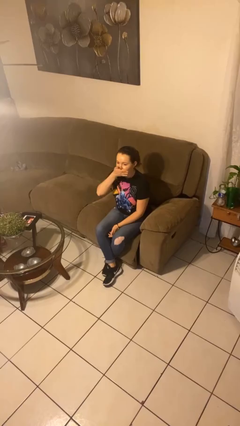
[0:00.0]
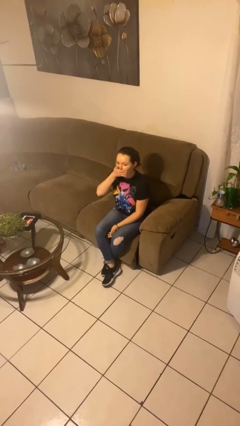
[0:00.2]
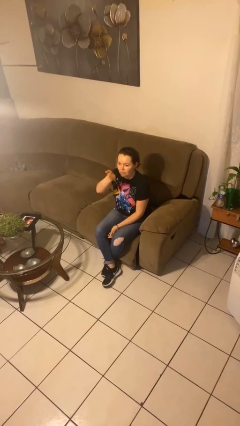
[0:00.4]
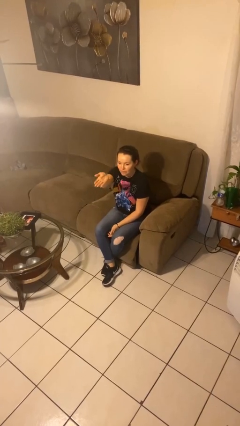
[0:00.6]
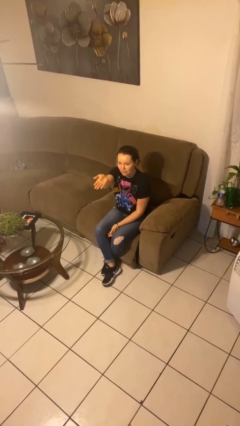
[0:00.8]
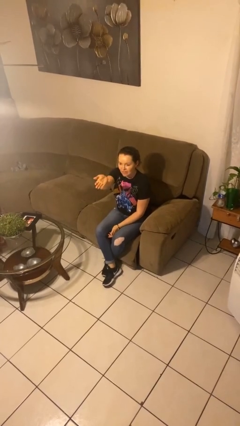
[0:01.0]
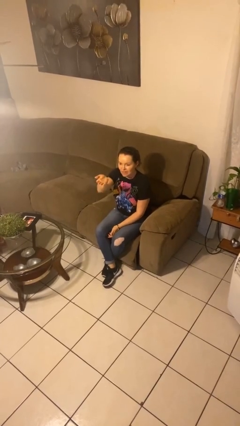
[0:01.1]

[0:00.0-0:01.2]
person gestures blow kiss

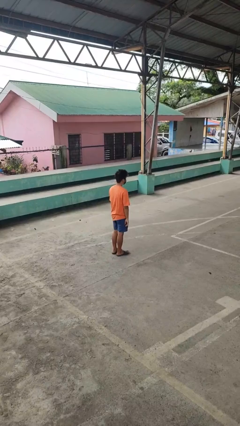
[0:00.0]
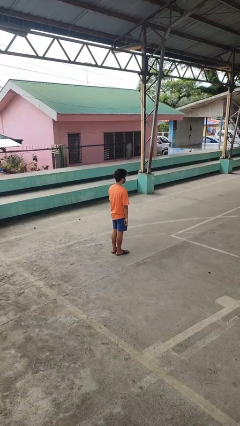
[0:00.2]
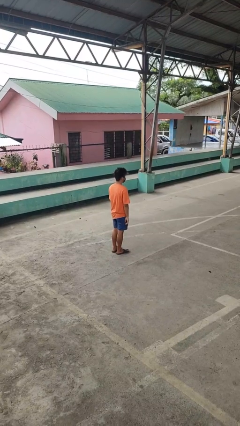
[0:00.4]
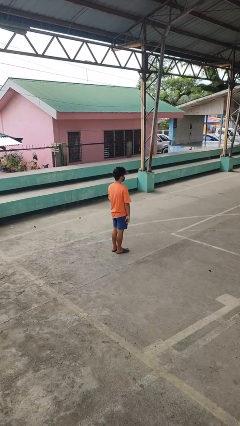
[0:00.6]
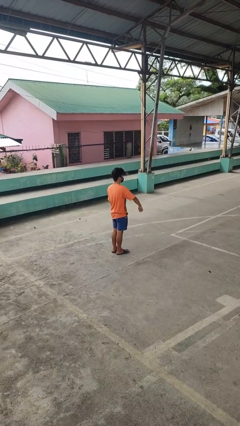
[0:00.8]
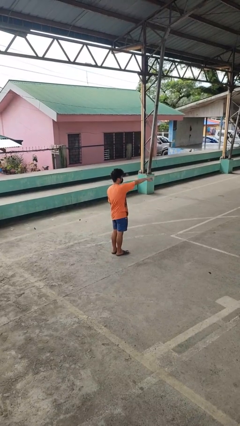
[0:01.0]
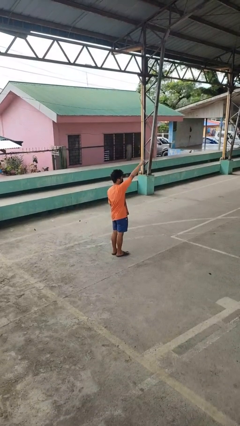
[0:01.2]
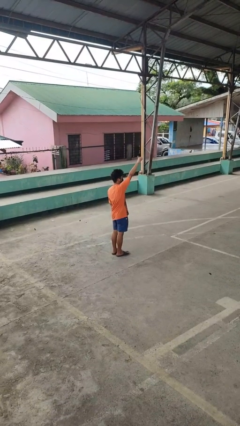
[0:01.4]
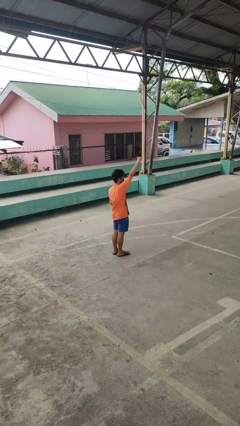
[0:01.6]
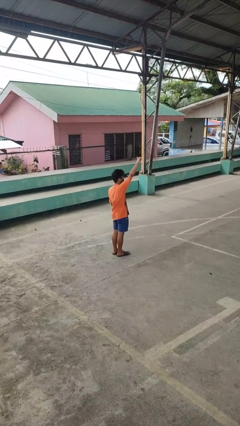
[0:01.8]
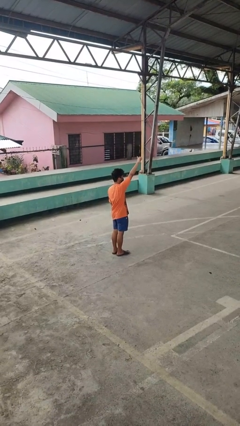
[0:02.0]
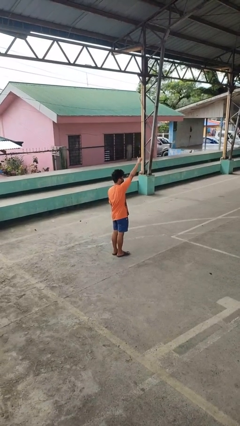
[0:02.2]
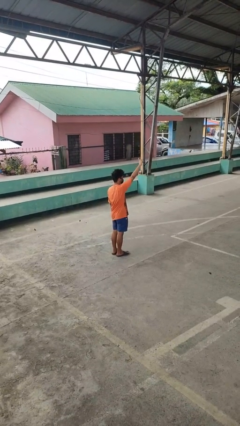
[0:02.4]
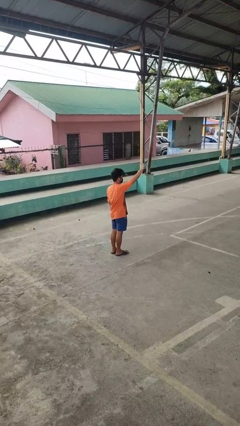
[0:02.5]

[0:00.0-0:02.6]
person gestures swipe up

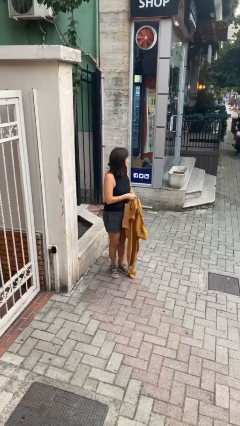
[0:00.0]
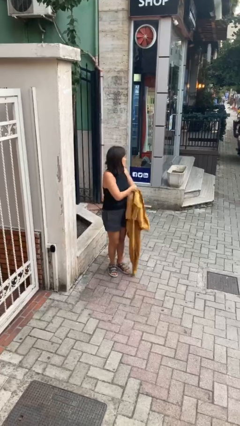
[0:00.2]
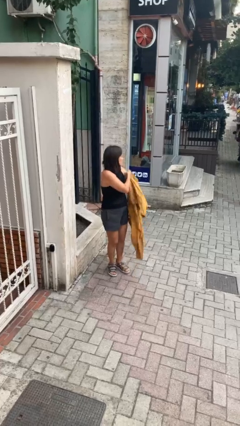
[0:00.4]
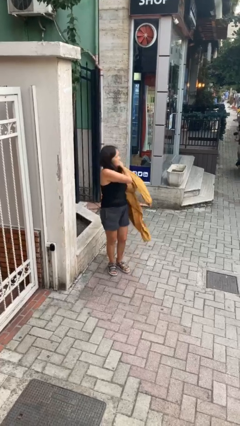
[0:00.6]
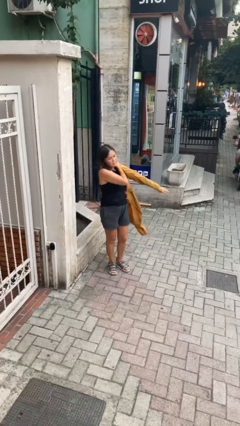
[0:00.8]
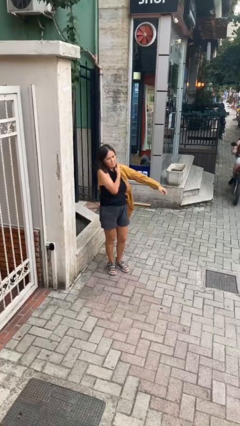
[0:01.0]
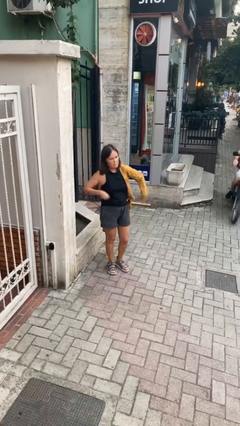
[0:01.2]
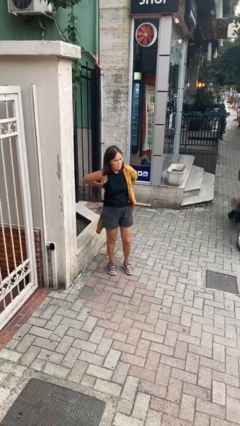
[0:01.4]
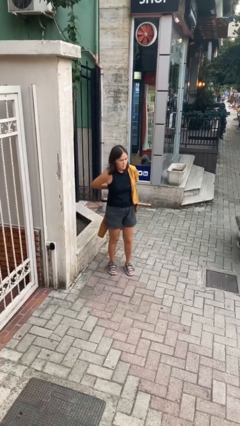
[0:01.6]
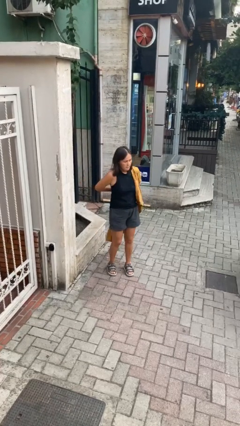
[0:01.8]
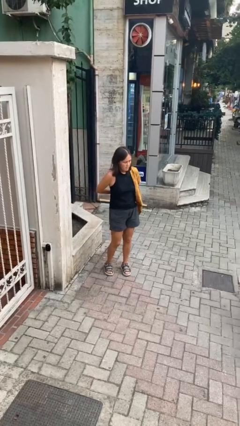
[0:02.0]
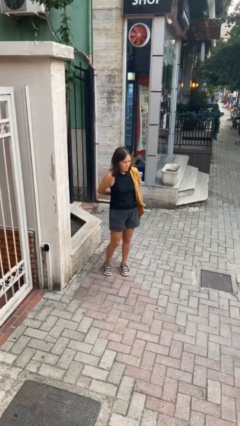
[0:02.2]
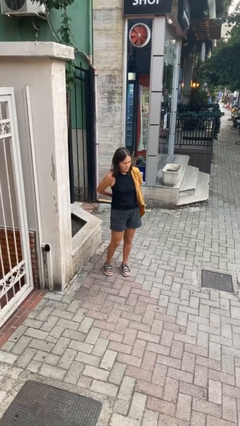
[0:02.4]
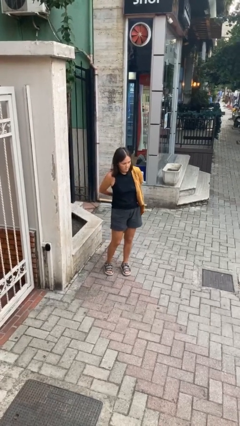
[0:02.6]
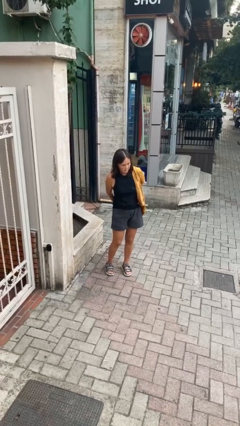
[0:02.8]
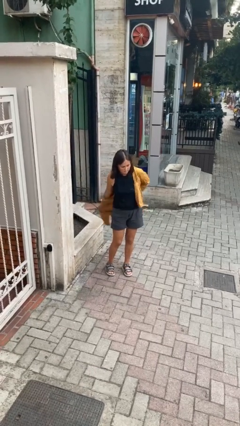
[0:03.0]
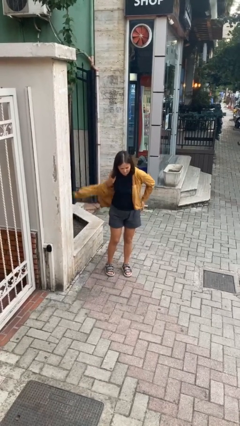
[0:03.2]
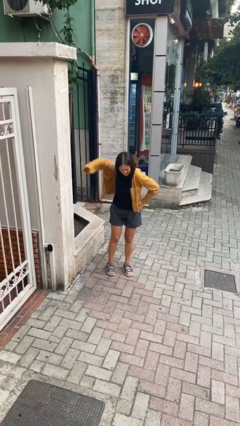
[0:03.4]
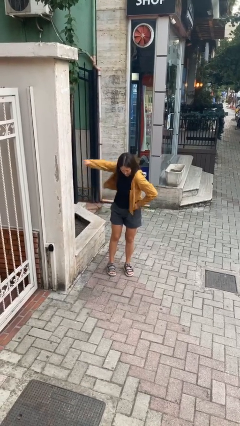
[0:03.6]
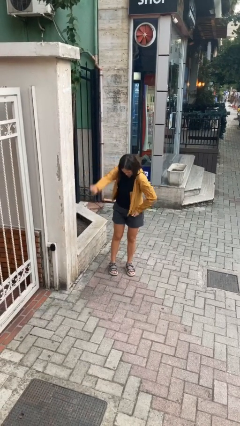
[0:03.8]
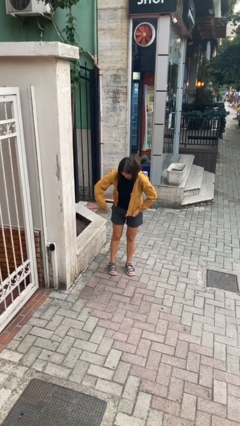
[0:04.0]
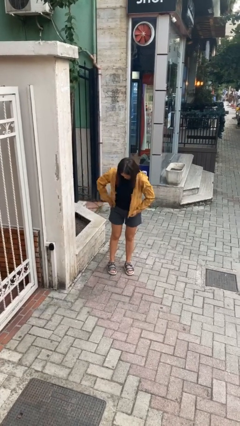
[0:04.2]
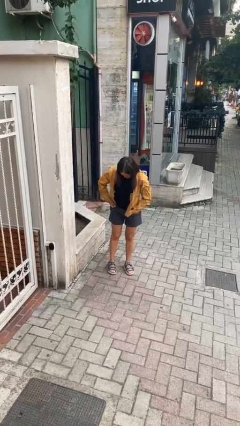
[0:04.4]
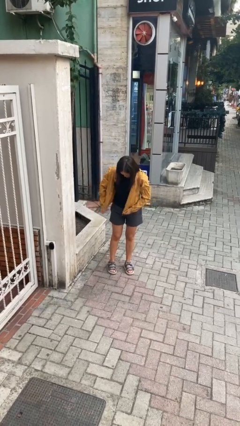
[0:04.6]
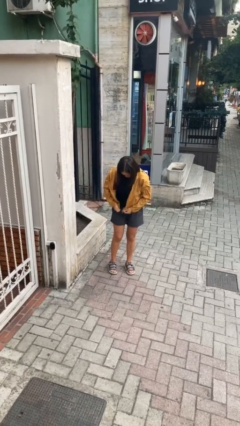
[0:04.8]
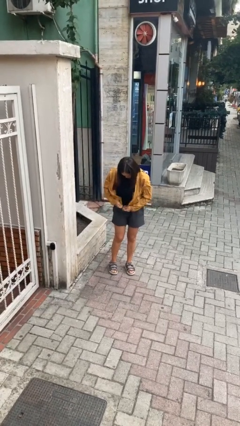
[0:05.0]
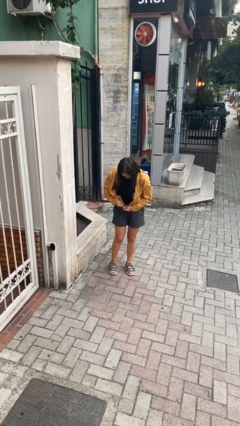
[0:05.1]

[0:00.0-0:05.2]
person puts on jacket

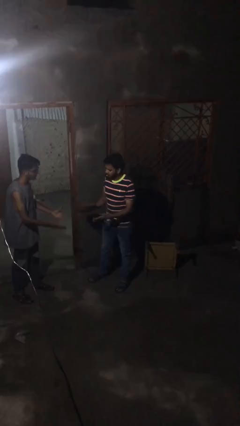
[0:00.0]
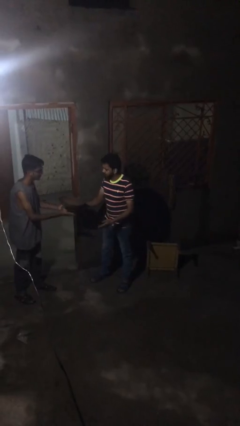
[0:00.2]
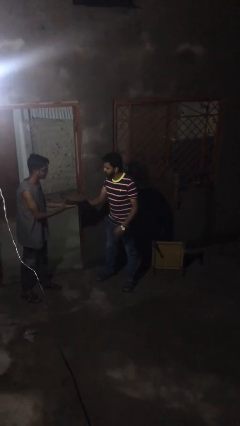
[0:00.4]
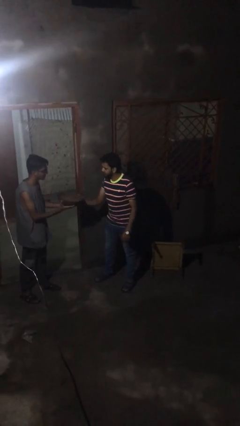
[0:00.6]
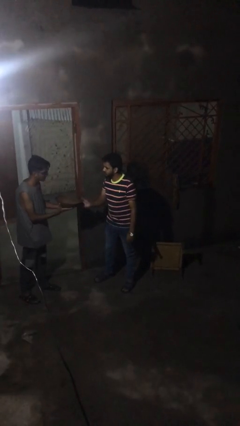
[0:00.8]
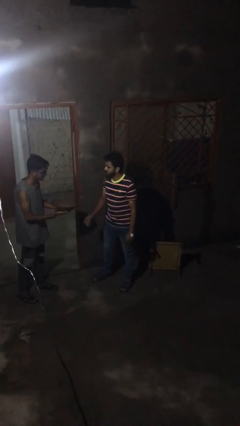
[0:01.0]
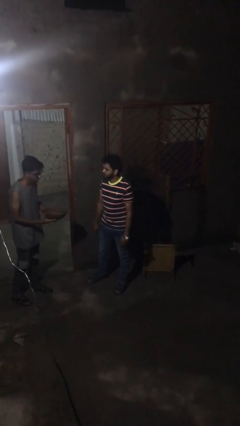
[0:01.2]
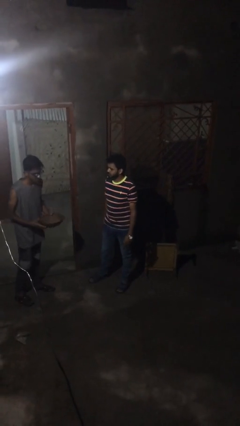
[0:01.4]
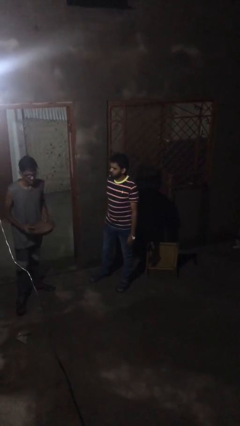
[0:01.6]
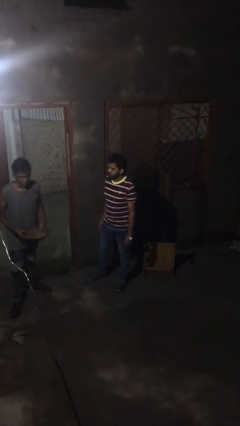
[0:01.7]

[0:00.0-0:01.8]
person transfers object to person

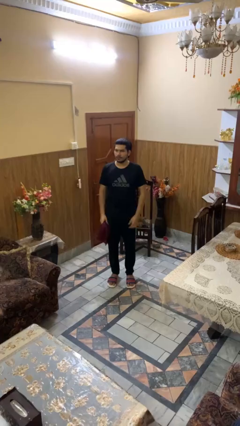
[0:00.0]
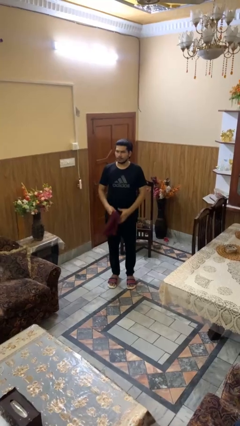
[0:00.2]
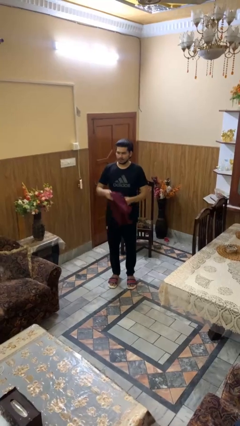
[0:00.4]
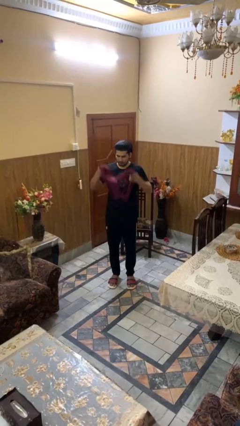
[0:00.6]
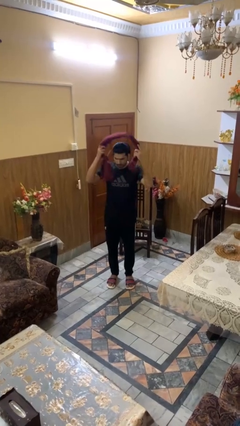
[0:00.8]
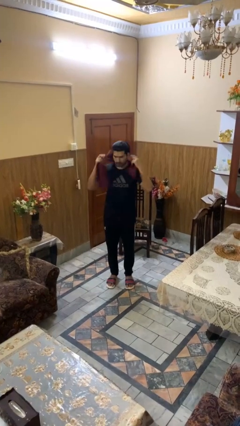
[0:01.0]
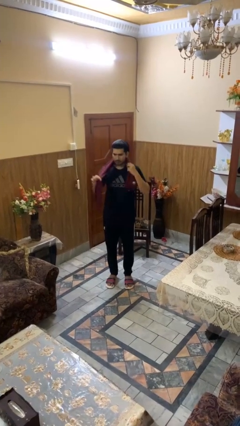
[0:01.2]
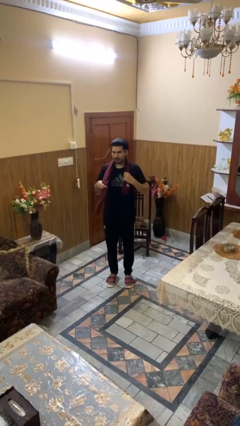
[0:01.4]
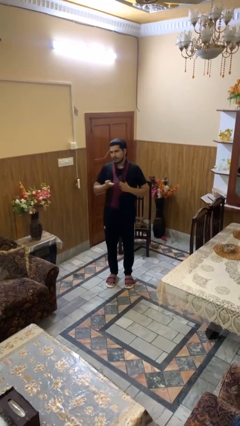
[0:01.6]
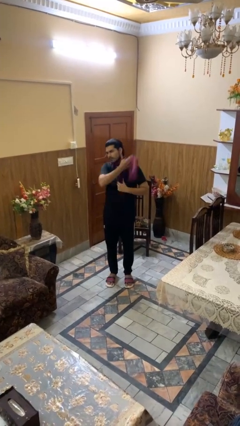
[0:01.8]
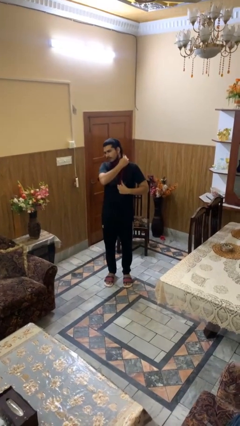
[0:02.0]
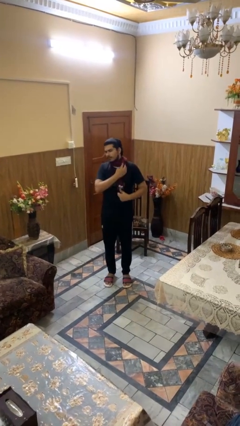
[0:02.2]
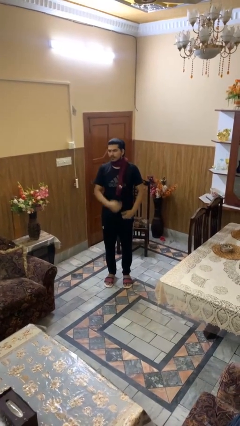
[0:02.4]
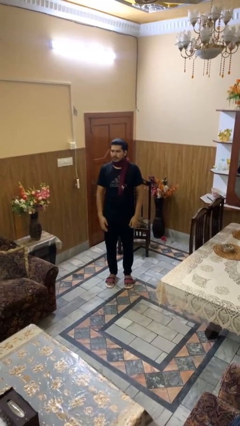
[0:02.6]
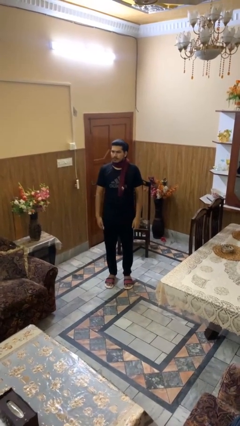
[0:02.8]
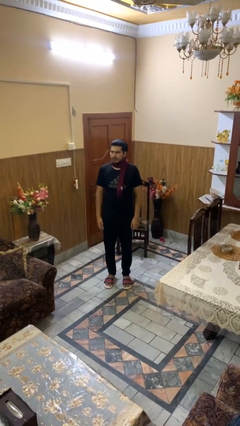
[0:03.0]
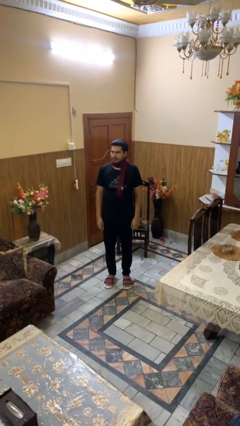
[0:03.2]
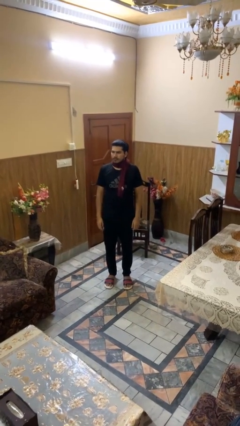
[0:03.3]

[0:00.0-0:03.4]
person puts on scarf

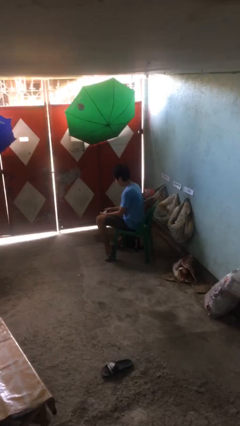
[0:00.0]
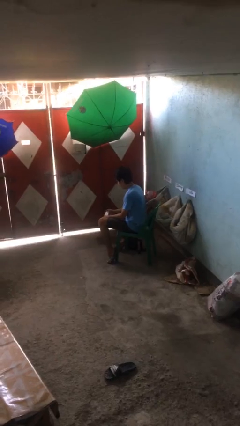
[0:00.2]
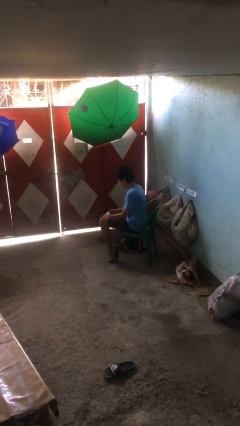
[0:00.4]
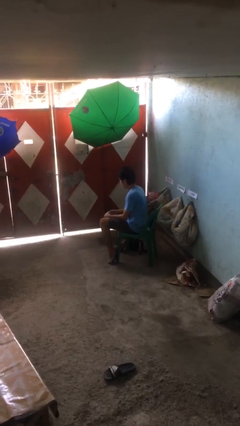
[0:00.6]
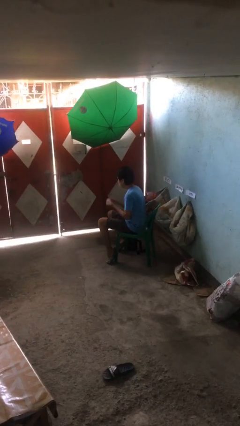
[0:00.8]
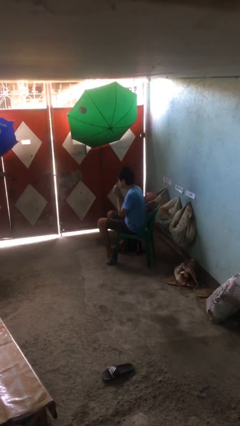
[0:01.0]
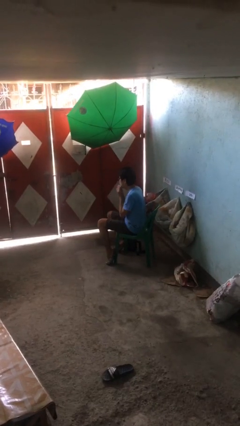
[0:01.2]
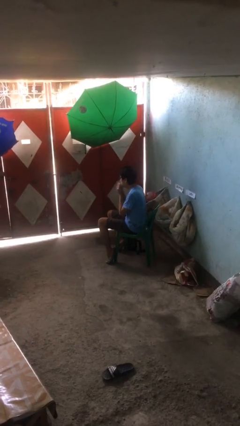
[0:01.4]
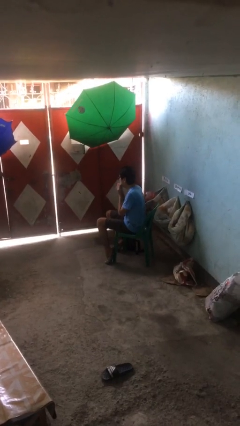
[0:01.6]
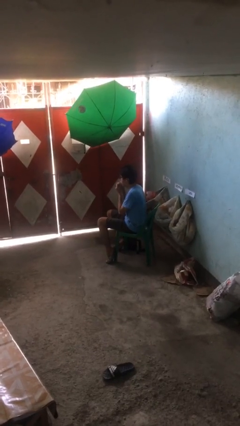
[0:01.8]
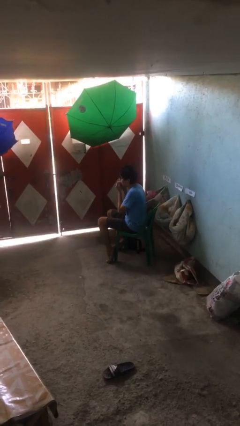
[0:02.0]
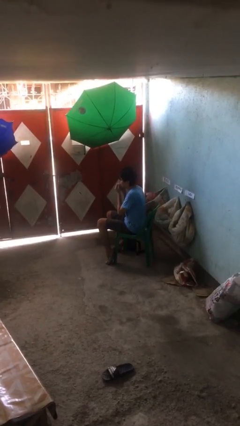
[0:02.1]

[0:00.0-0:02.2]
person wipes mouth with napkin

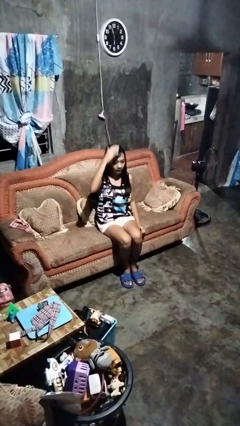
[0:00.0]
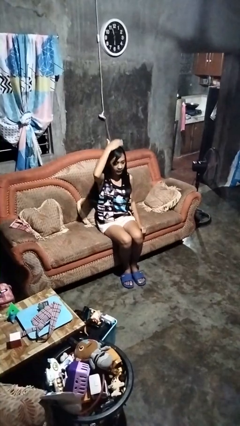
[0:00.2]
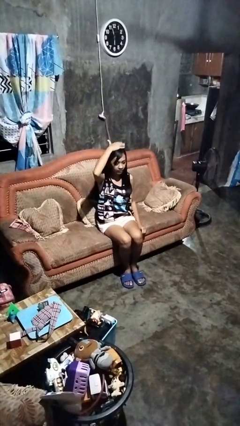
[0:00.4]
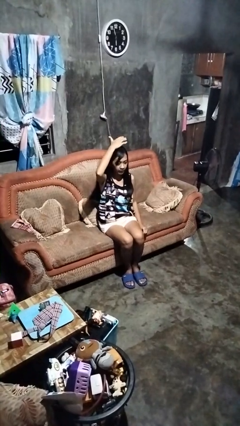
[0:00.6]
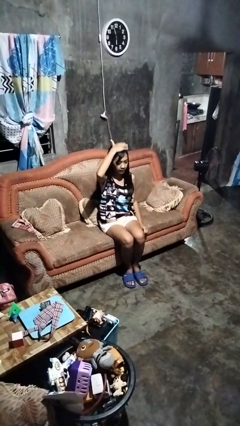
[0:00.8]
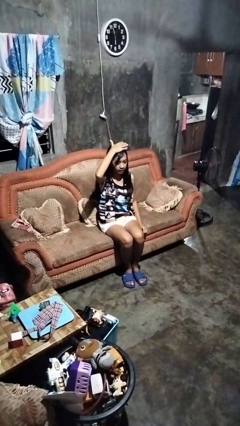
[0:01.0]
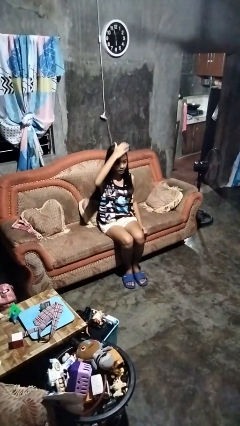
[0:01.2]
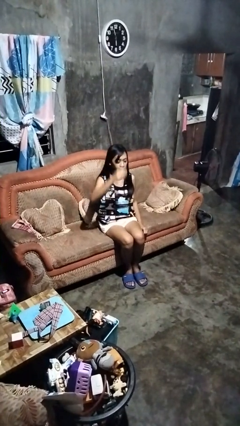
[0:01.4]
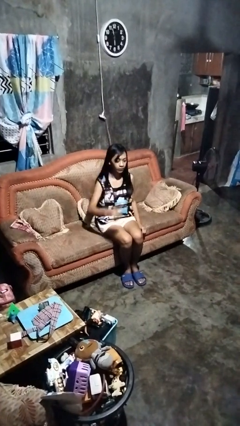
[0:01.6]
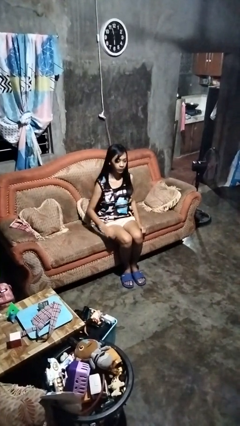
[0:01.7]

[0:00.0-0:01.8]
person pats head
